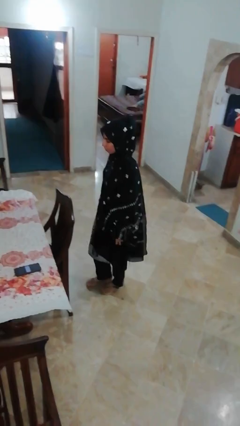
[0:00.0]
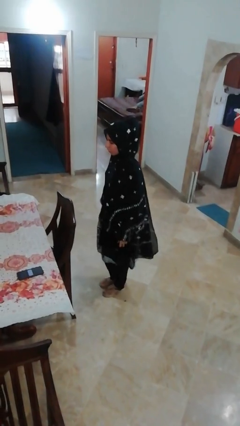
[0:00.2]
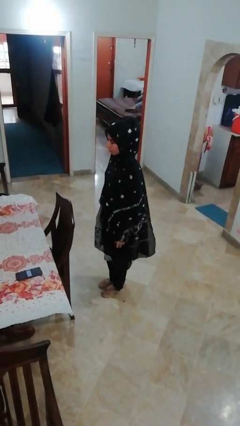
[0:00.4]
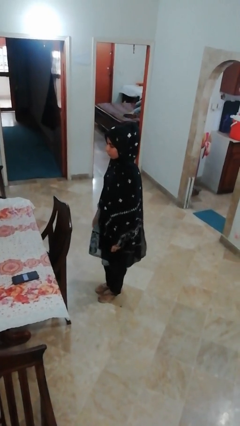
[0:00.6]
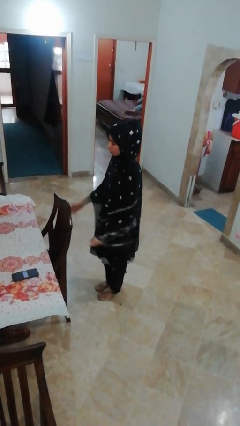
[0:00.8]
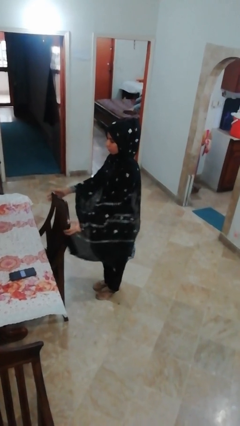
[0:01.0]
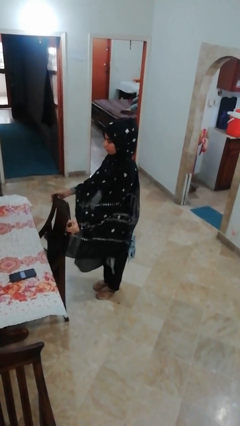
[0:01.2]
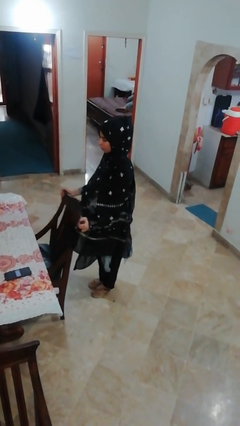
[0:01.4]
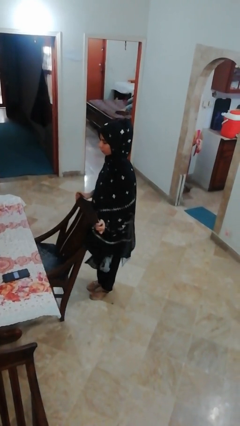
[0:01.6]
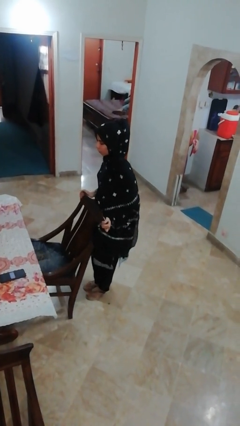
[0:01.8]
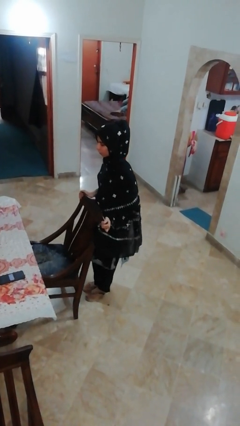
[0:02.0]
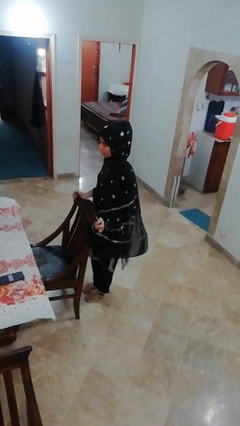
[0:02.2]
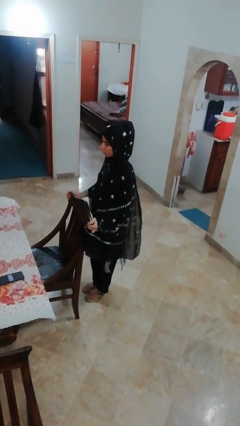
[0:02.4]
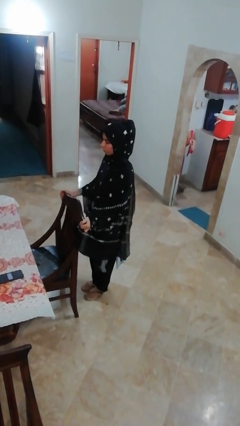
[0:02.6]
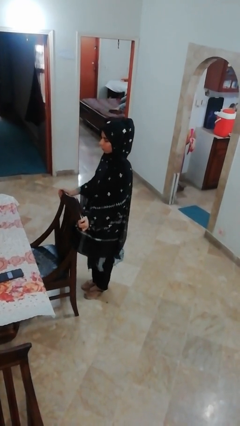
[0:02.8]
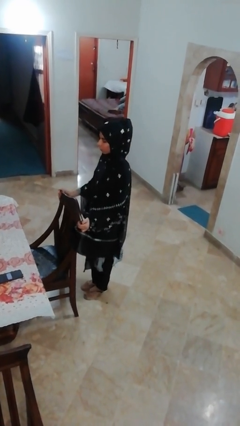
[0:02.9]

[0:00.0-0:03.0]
person pulls out chair

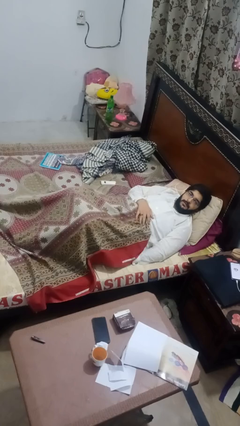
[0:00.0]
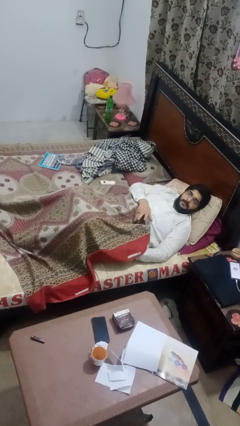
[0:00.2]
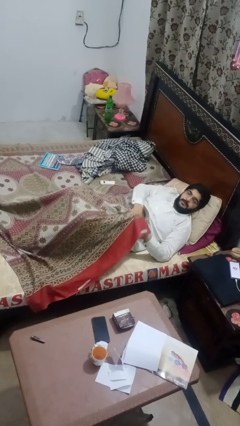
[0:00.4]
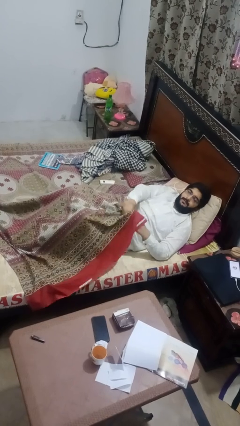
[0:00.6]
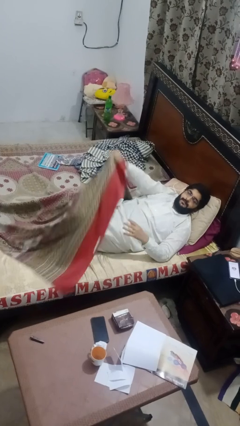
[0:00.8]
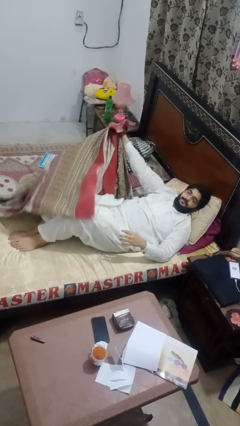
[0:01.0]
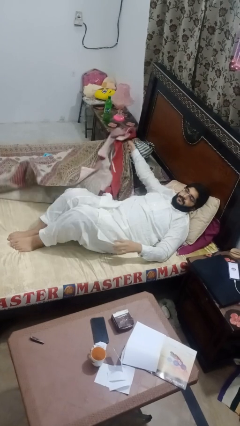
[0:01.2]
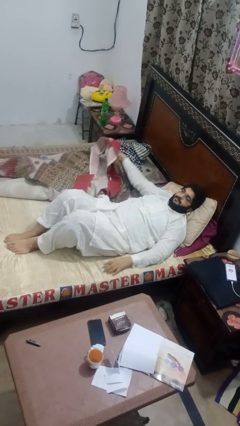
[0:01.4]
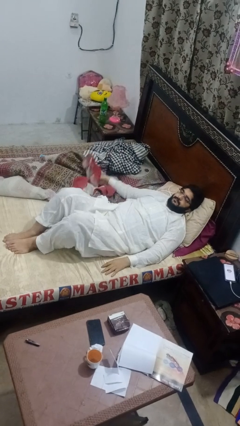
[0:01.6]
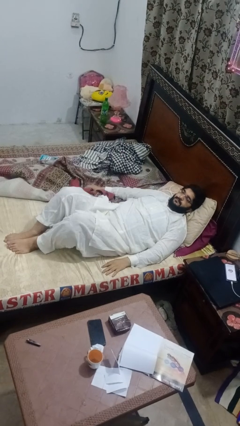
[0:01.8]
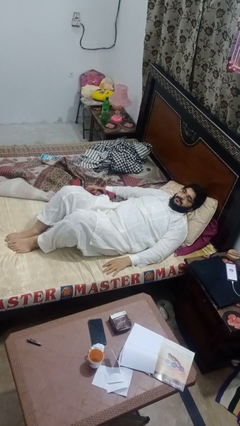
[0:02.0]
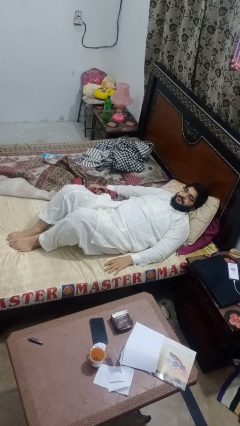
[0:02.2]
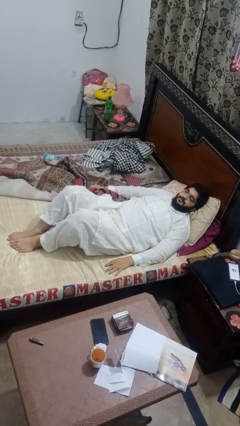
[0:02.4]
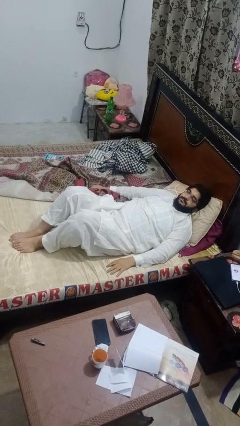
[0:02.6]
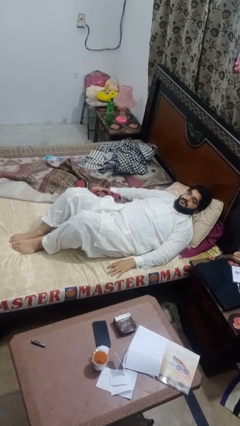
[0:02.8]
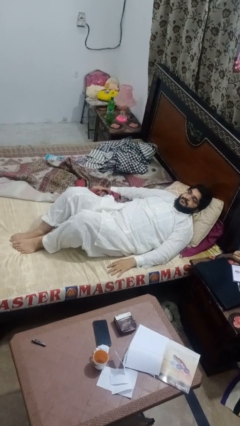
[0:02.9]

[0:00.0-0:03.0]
person uncovers with bedsheets

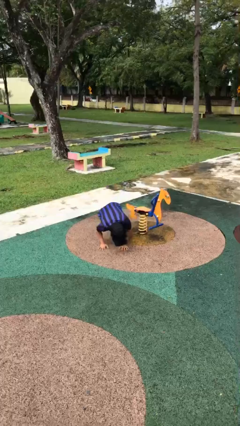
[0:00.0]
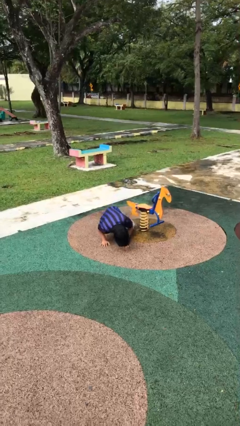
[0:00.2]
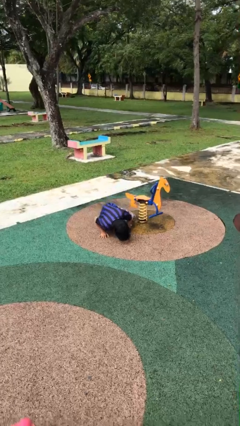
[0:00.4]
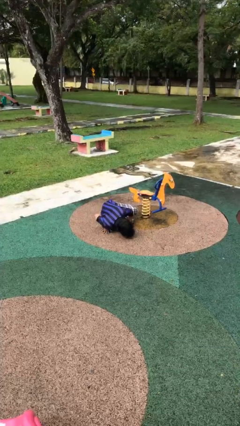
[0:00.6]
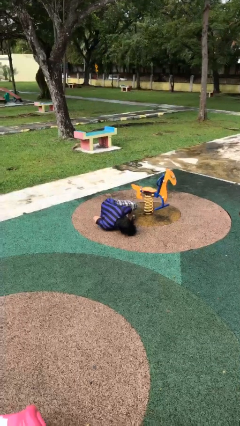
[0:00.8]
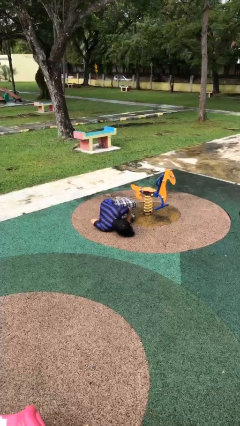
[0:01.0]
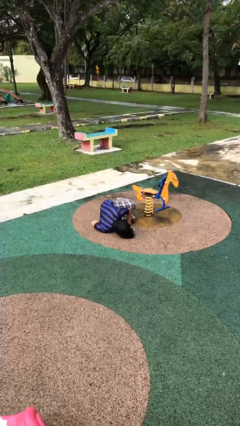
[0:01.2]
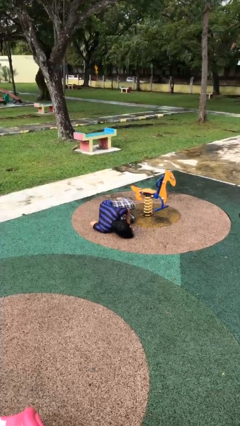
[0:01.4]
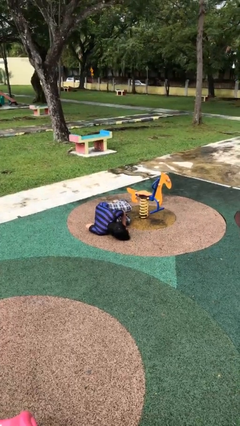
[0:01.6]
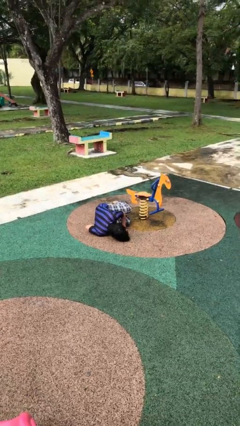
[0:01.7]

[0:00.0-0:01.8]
person lies down on floor

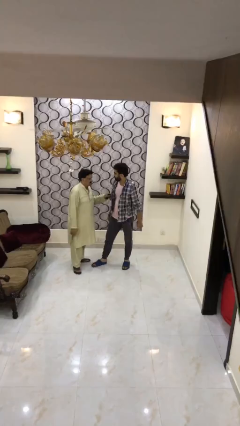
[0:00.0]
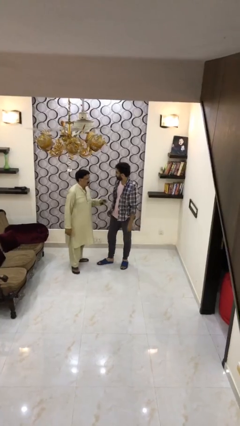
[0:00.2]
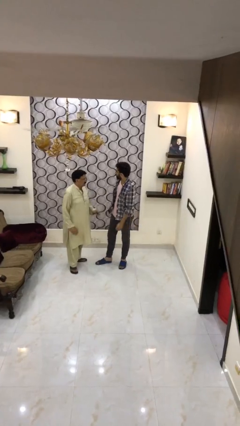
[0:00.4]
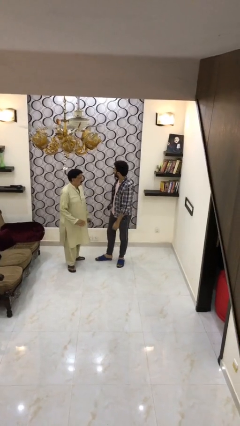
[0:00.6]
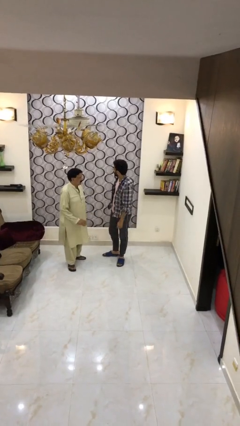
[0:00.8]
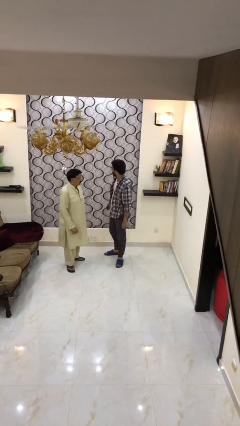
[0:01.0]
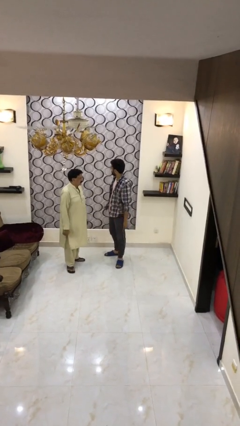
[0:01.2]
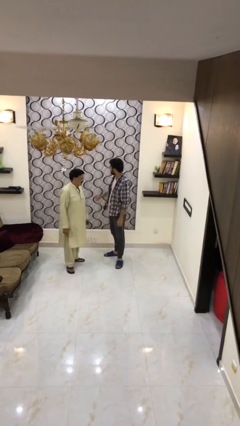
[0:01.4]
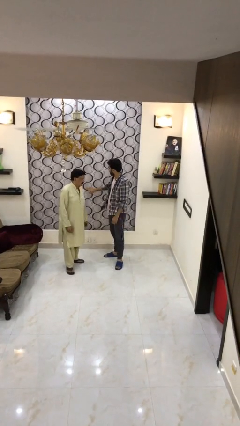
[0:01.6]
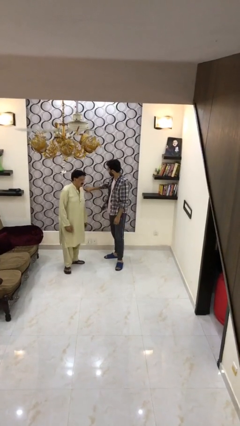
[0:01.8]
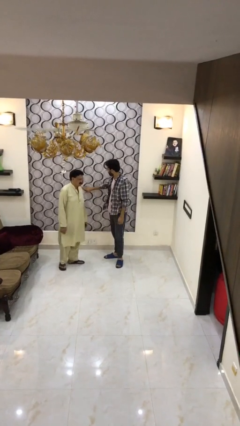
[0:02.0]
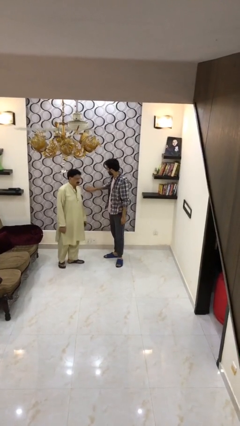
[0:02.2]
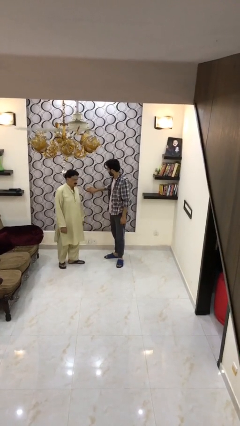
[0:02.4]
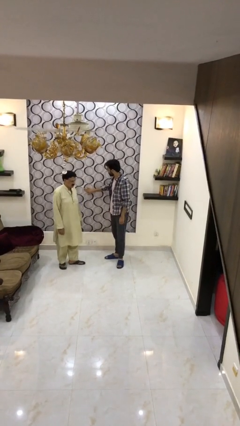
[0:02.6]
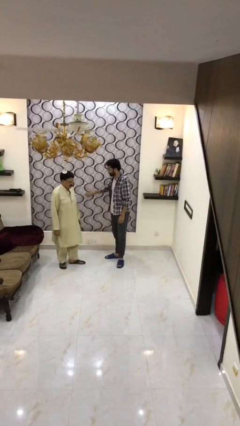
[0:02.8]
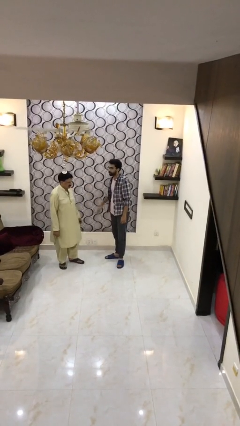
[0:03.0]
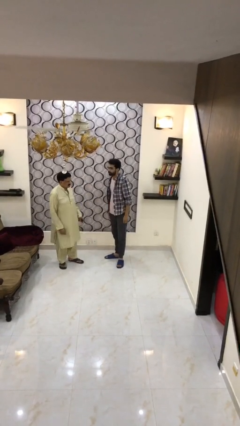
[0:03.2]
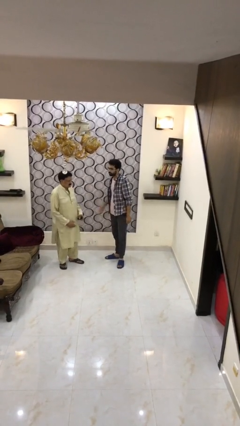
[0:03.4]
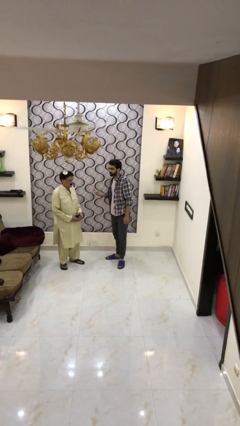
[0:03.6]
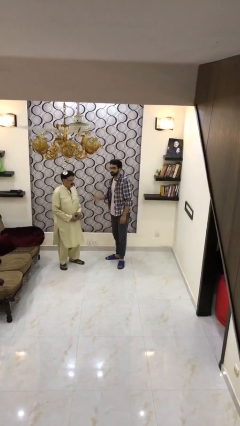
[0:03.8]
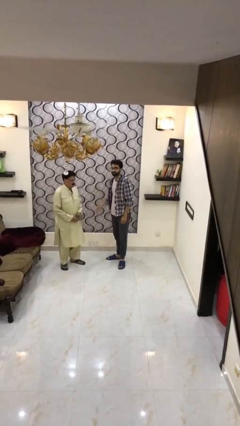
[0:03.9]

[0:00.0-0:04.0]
person talks to person

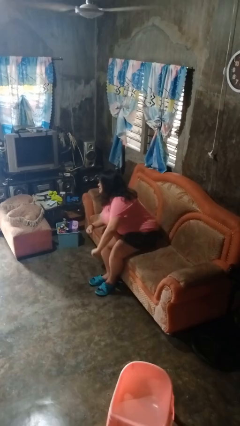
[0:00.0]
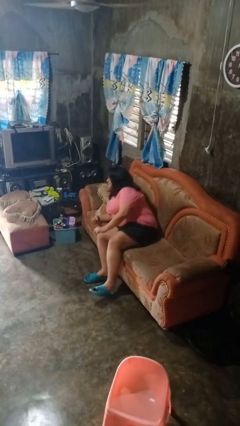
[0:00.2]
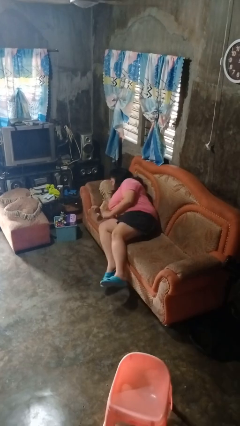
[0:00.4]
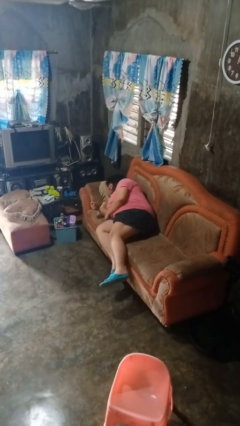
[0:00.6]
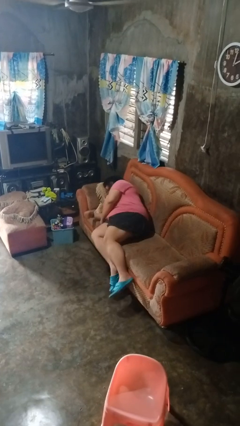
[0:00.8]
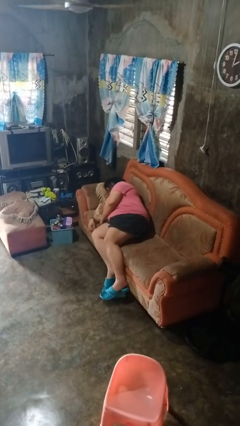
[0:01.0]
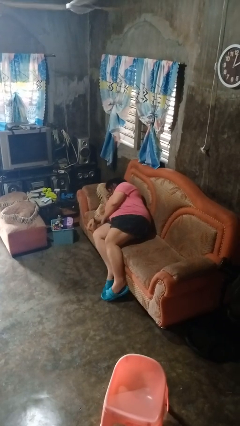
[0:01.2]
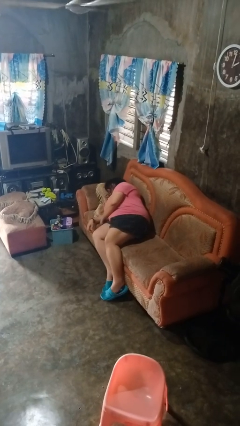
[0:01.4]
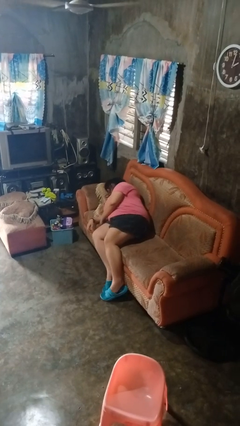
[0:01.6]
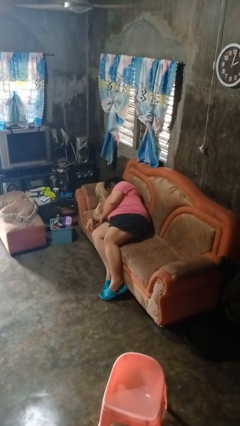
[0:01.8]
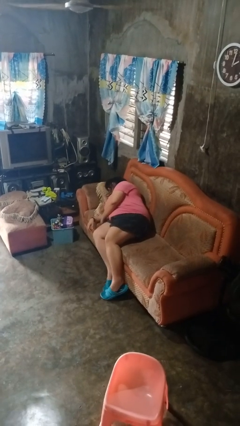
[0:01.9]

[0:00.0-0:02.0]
person lies down on couch

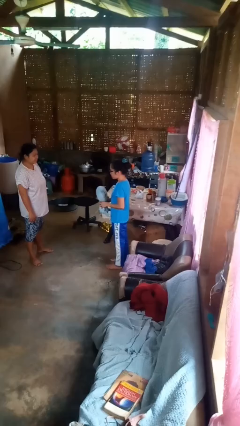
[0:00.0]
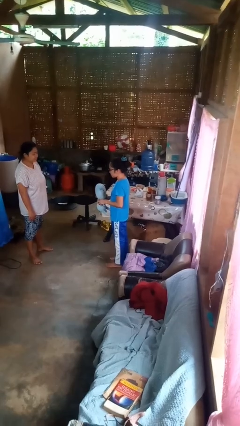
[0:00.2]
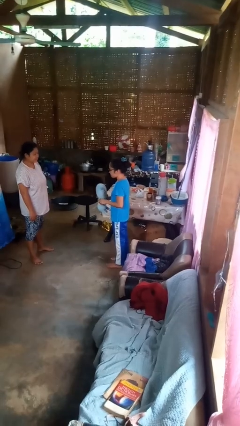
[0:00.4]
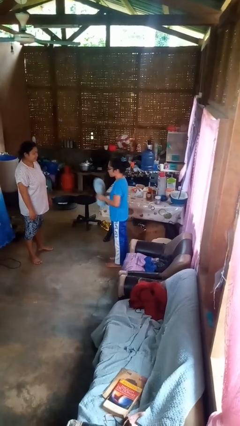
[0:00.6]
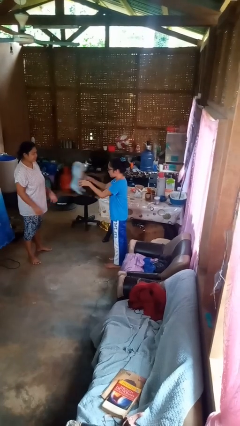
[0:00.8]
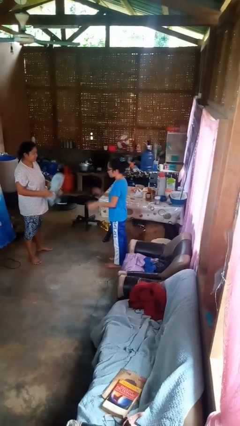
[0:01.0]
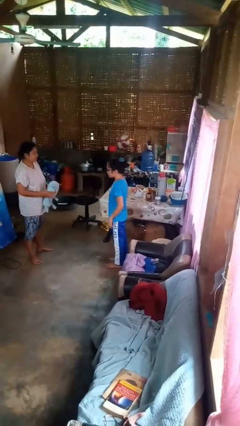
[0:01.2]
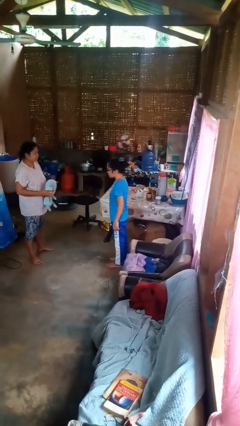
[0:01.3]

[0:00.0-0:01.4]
person throws object to person

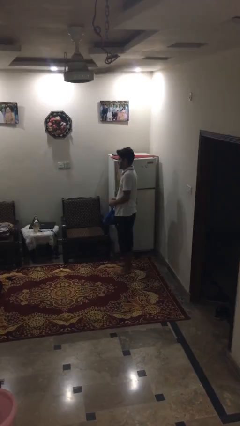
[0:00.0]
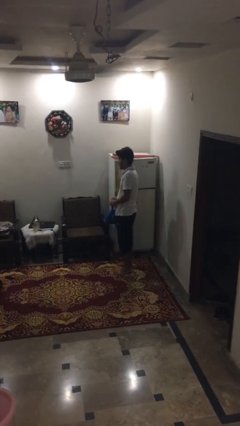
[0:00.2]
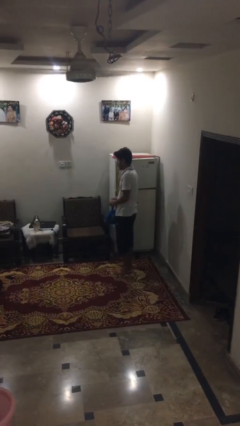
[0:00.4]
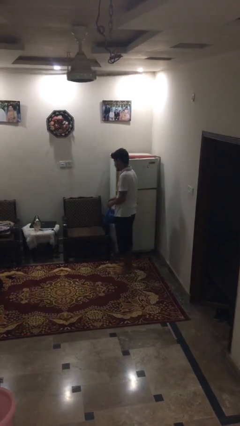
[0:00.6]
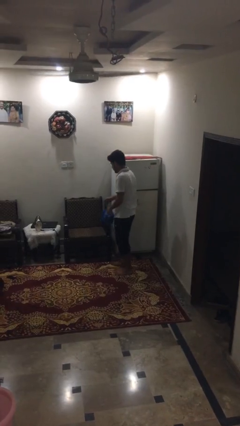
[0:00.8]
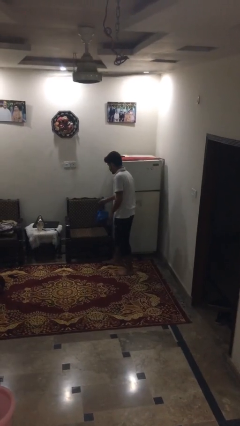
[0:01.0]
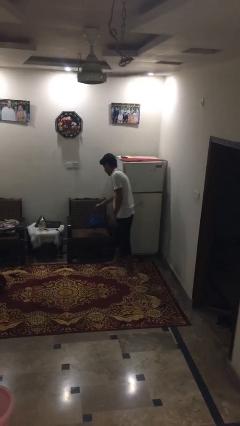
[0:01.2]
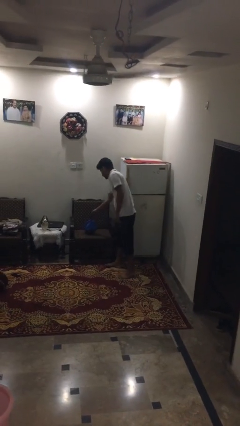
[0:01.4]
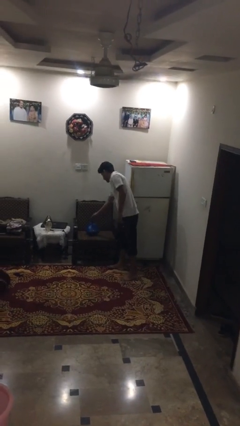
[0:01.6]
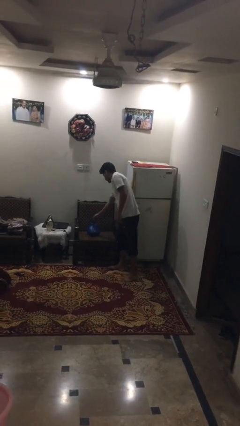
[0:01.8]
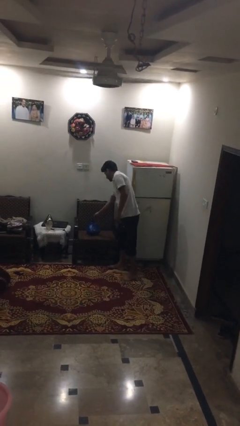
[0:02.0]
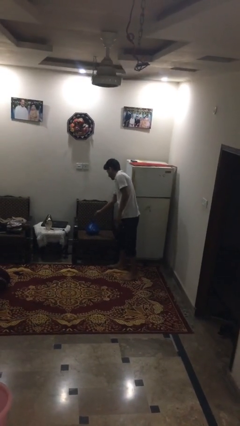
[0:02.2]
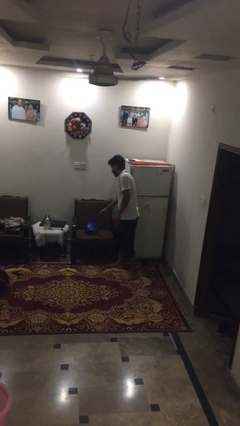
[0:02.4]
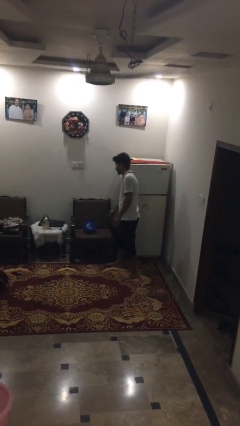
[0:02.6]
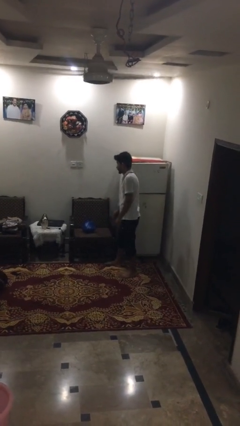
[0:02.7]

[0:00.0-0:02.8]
person puts down object on couch
